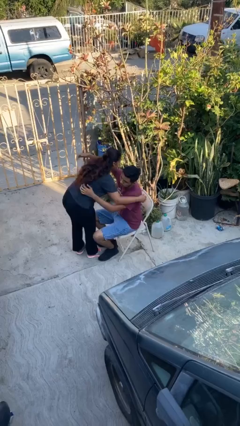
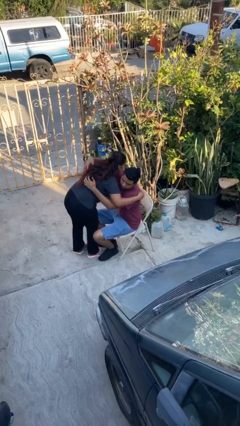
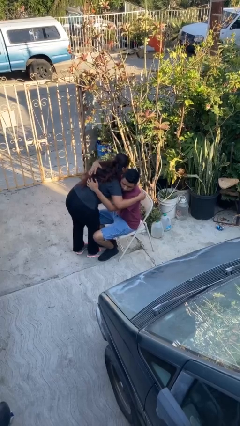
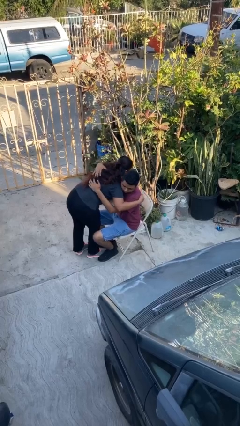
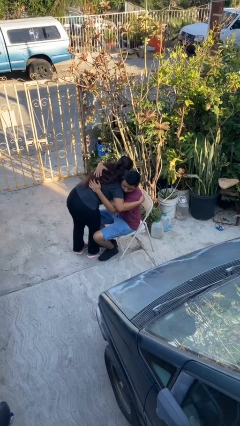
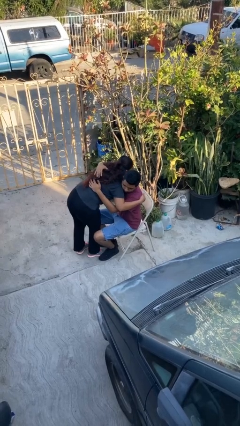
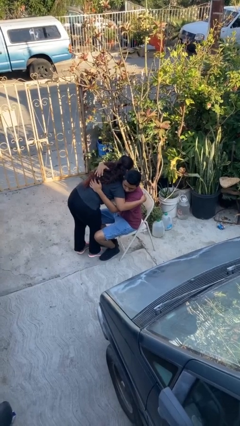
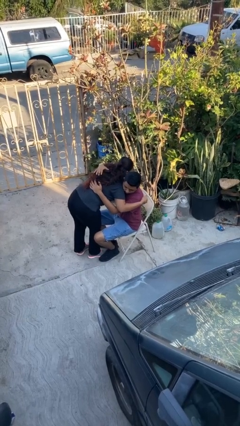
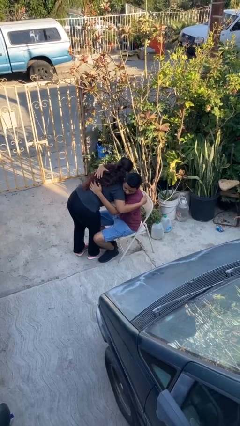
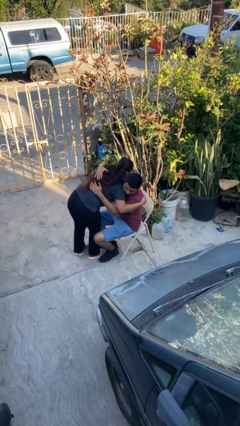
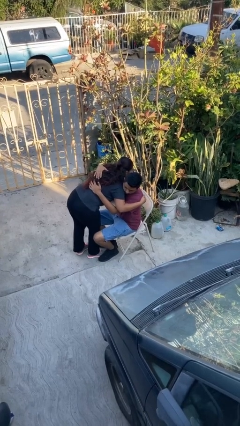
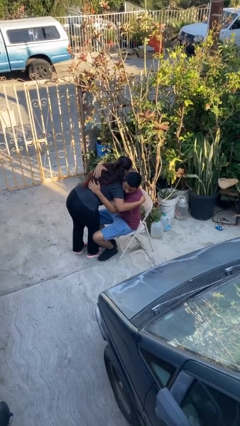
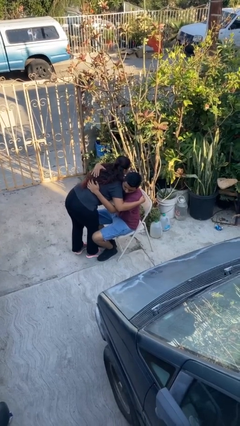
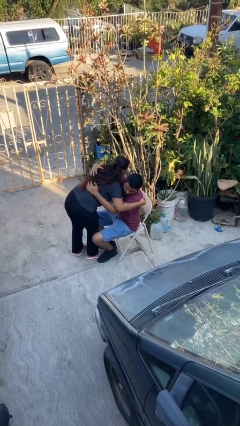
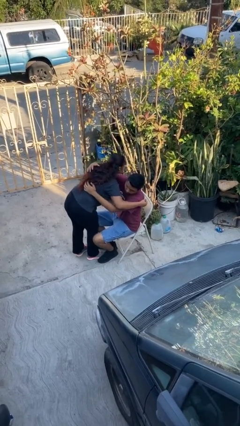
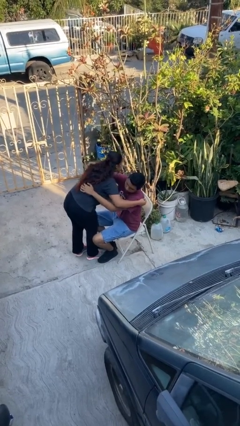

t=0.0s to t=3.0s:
person embraces person

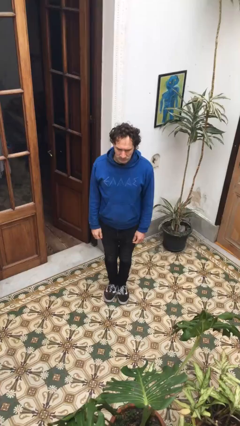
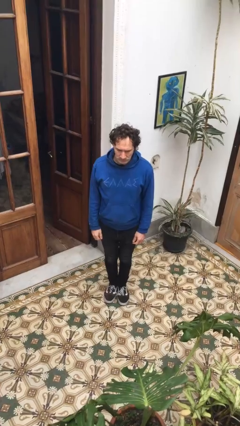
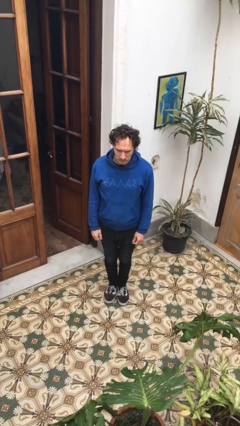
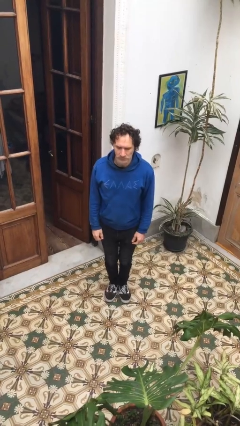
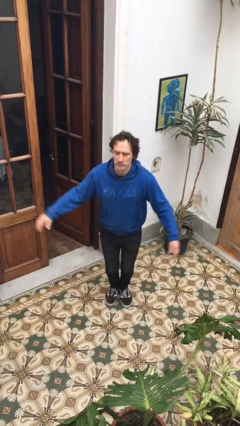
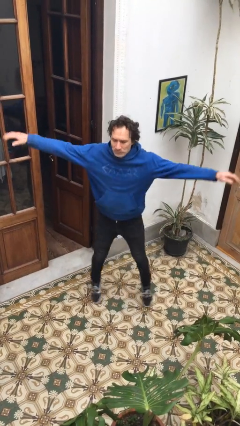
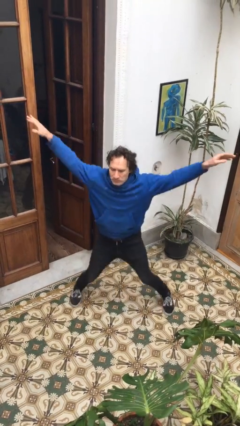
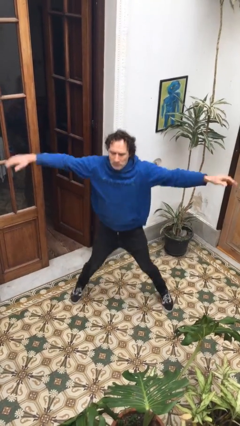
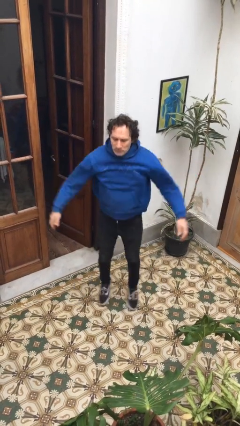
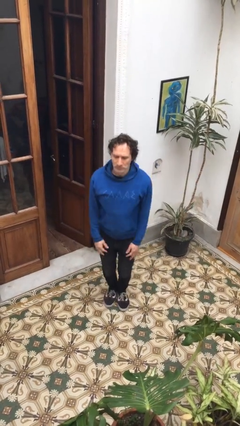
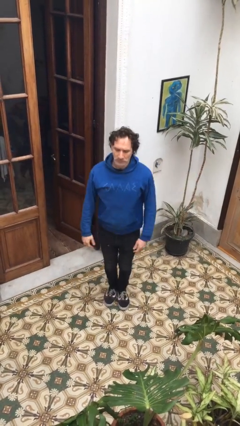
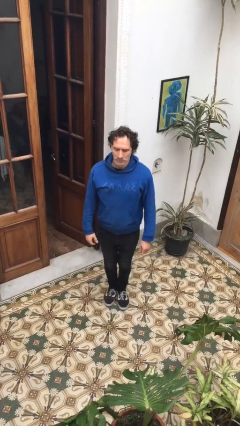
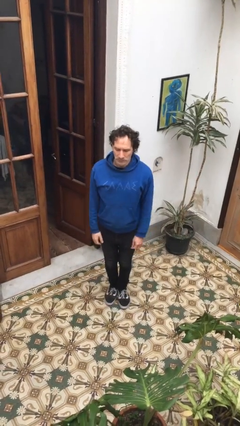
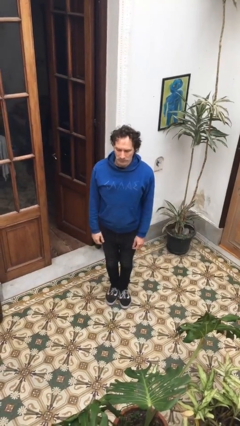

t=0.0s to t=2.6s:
person exercises with jumping jacks

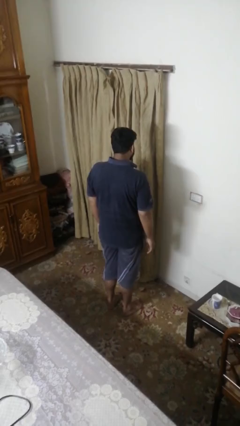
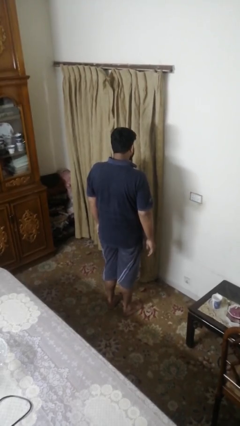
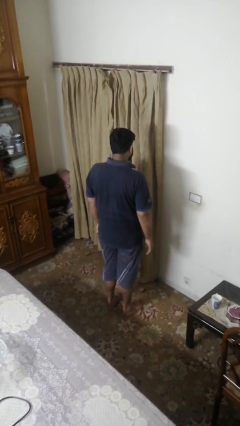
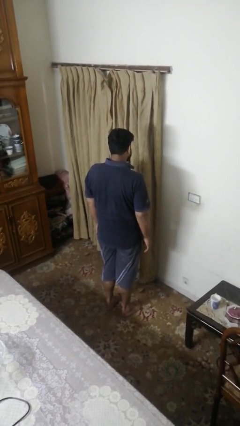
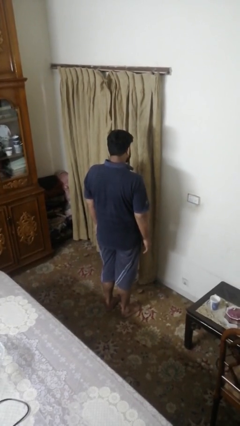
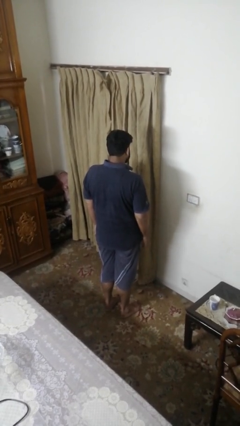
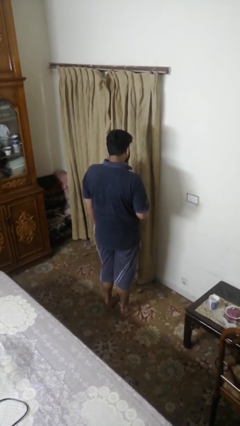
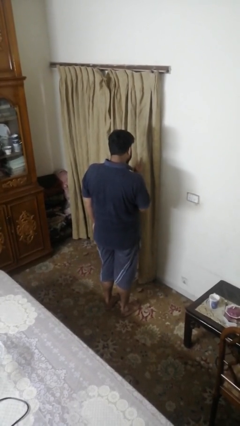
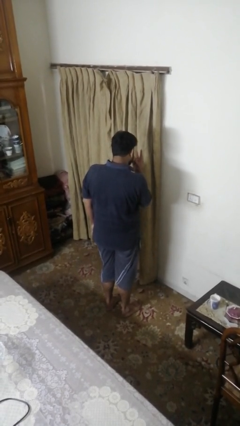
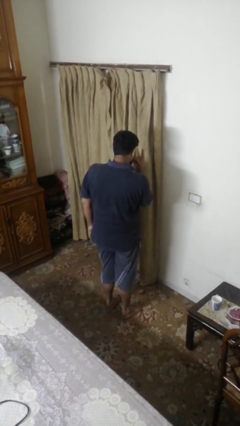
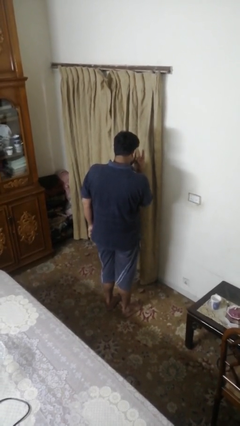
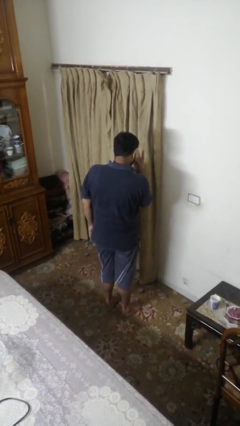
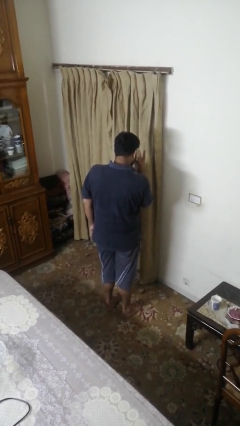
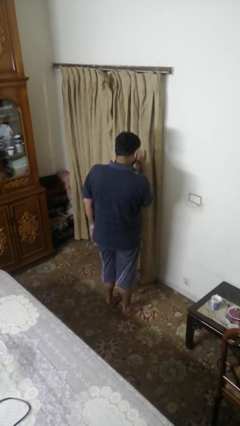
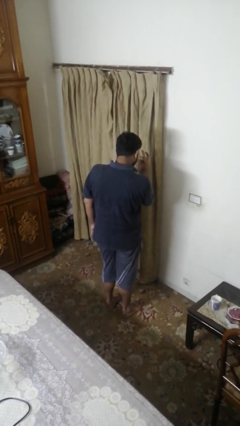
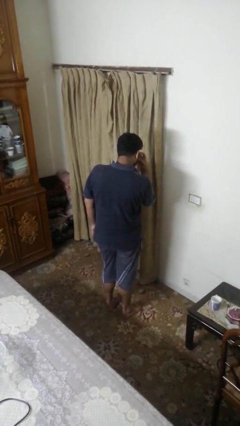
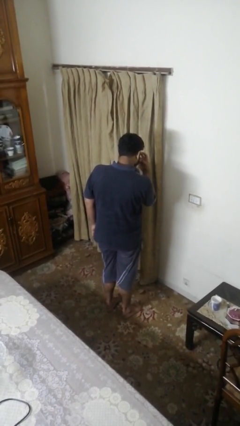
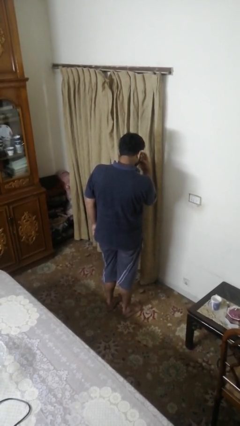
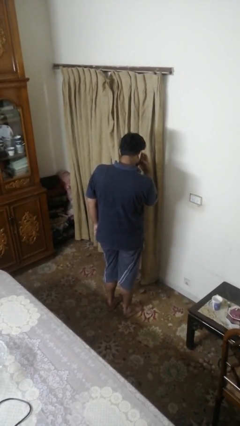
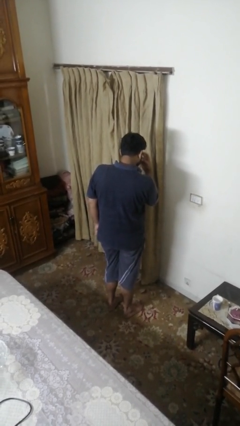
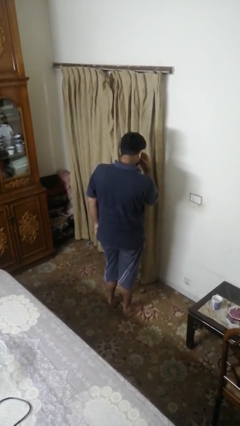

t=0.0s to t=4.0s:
person gestures watch closely

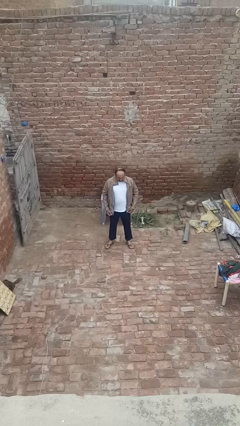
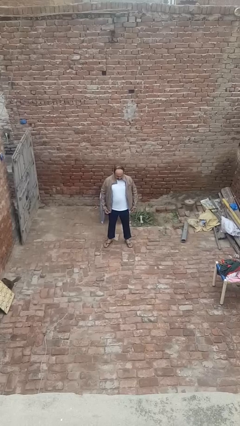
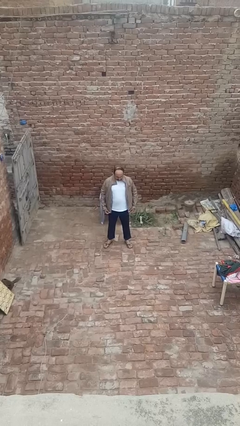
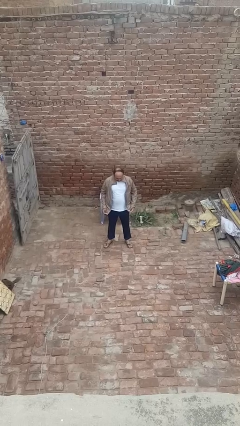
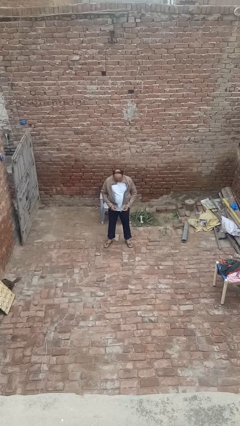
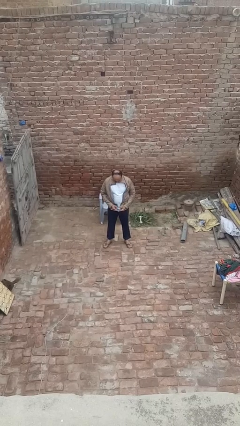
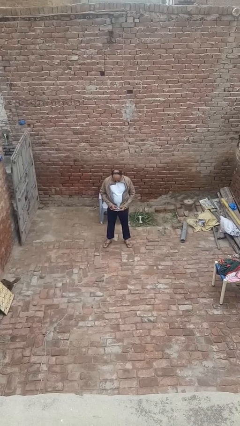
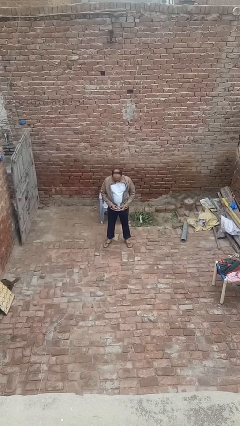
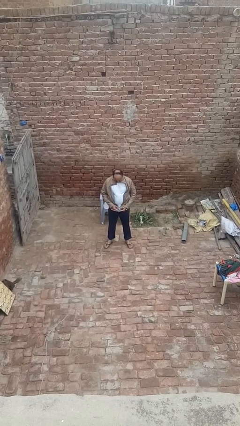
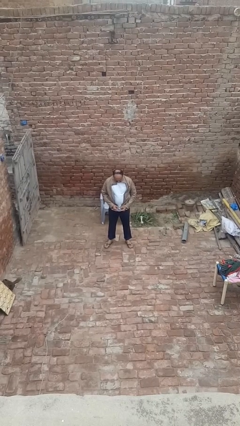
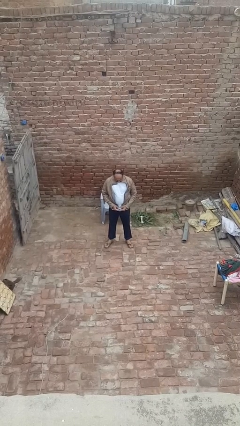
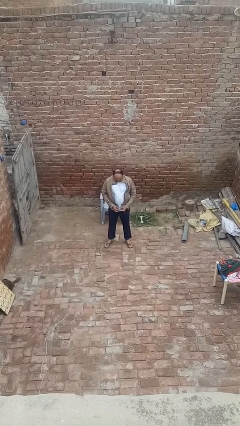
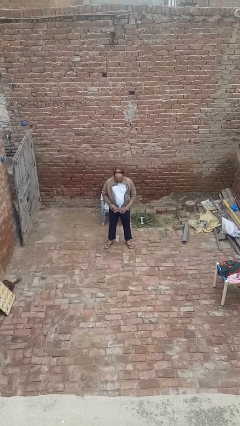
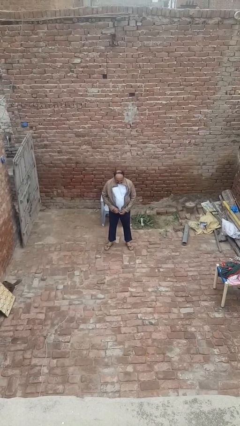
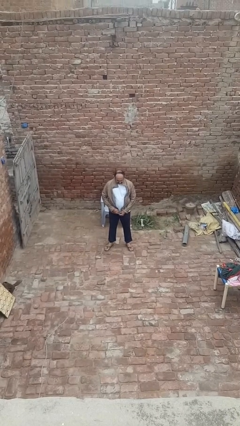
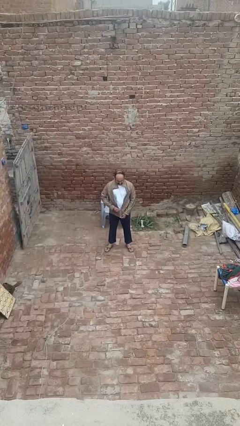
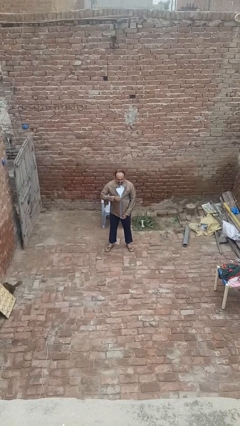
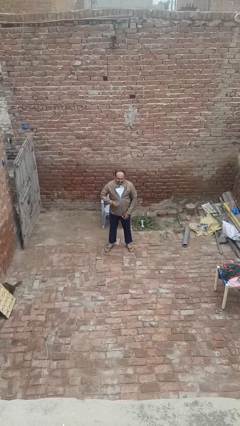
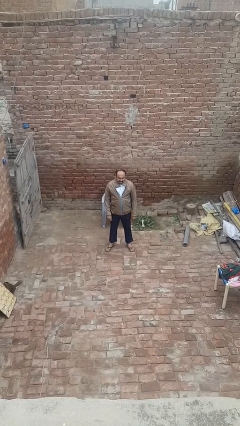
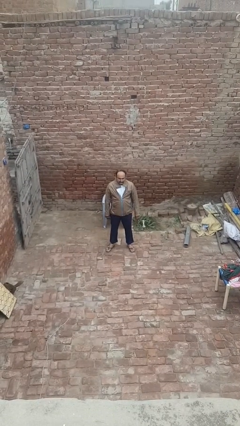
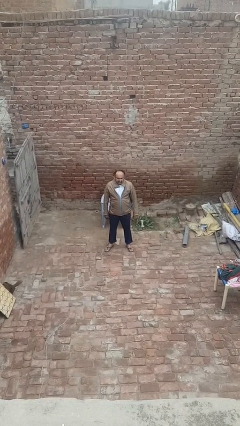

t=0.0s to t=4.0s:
person zips up jacket

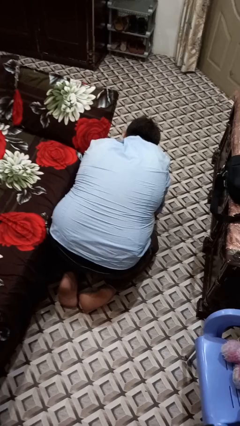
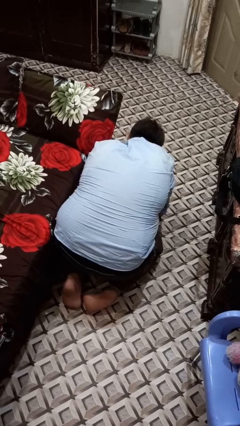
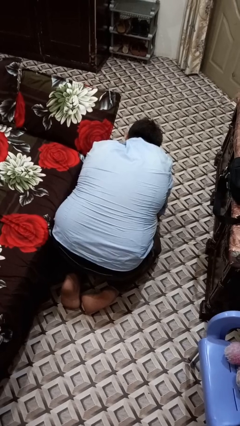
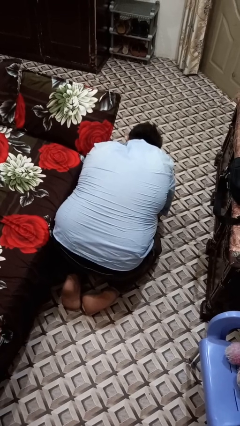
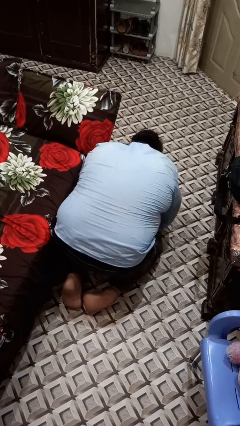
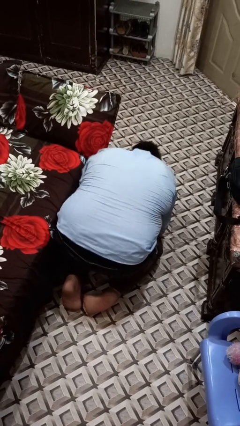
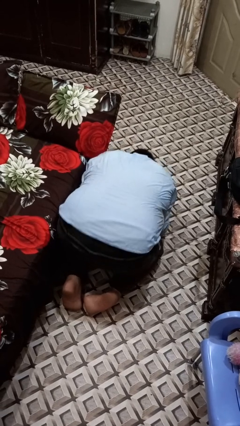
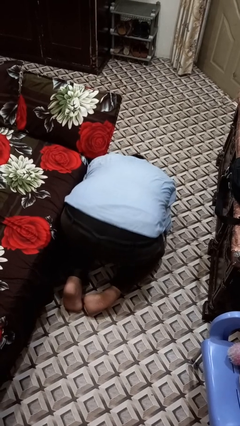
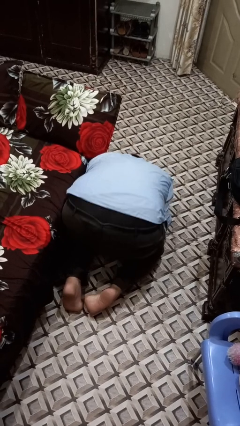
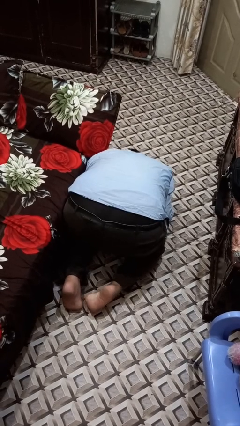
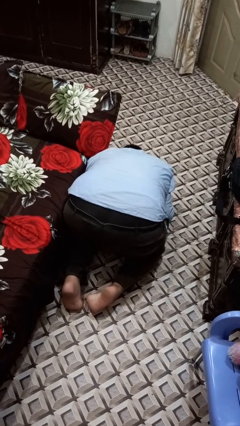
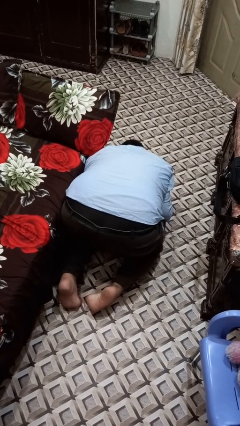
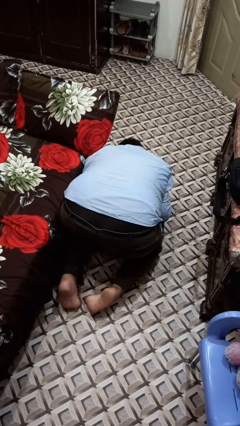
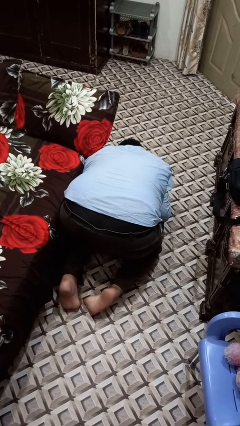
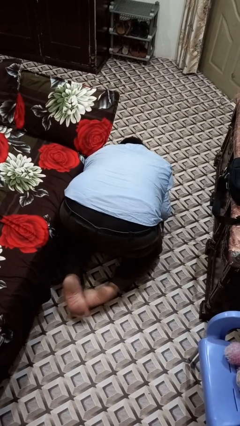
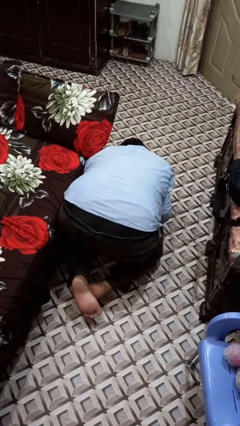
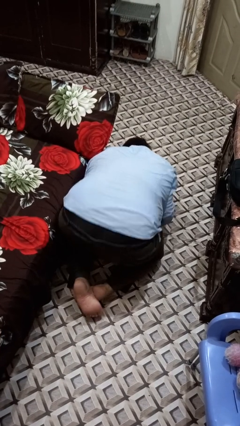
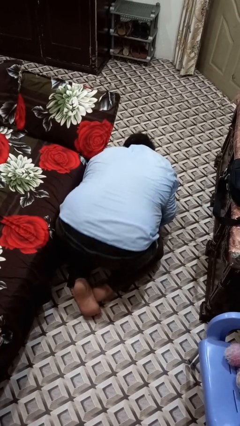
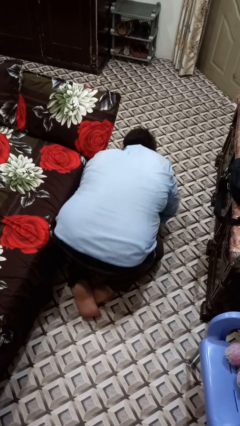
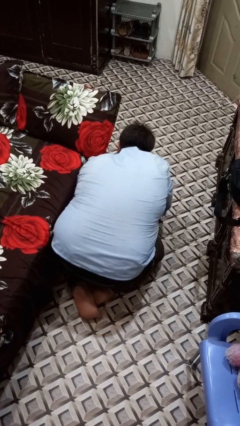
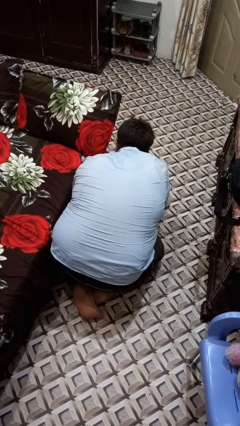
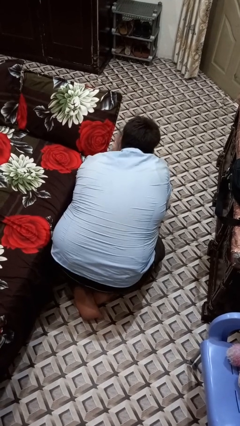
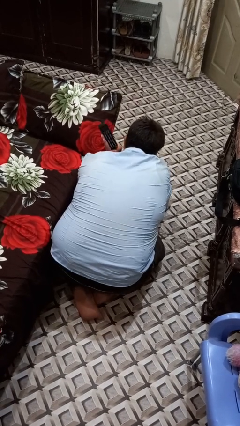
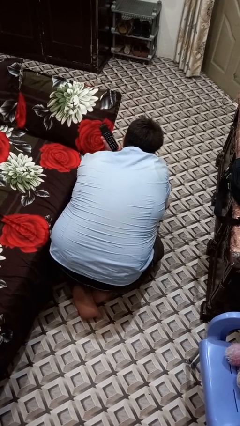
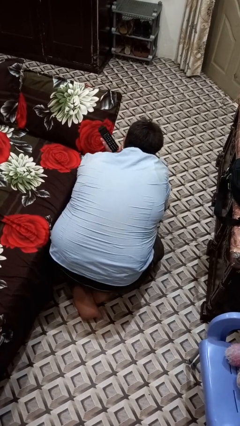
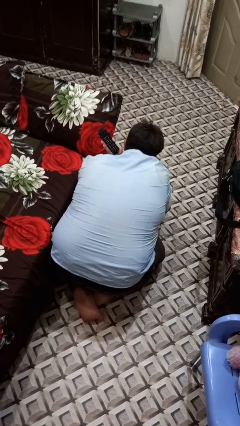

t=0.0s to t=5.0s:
person searches under couch
